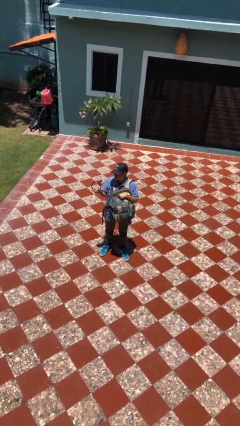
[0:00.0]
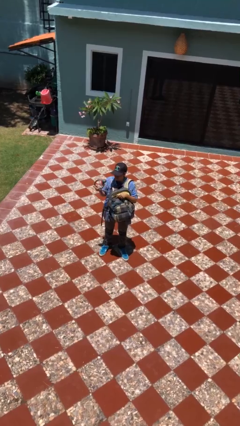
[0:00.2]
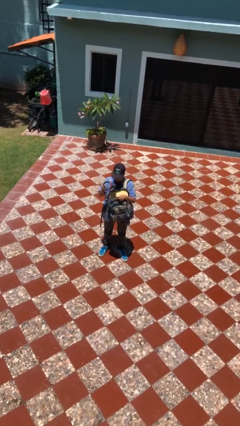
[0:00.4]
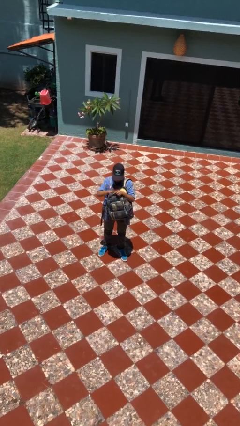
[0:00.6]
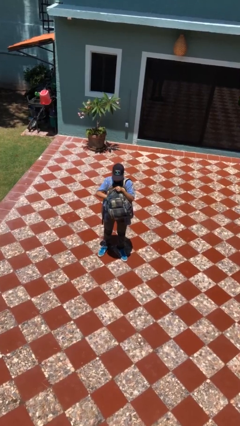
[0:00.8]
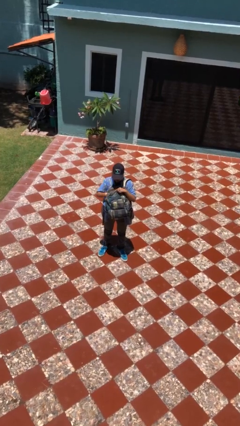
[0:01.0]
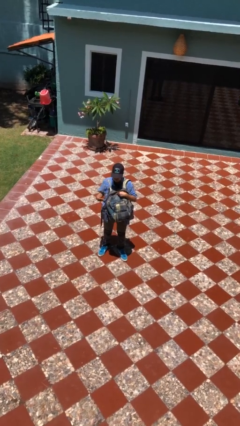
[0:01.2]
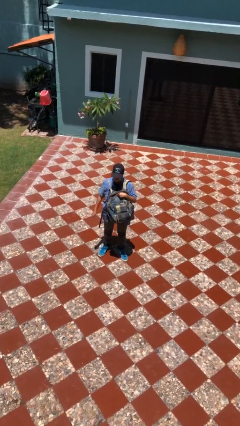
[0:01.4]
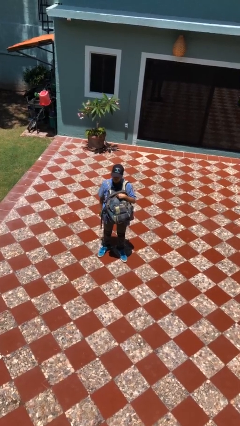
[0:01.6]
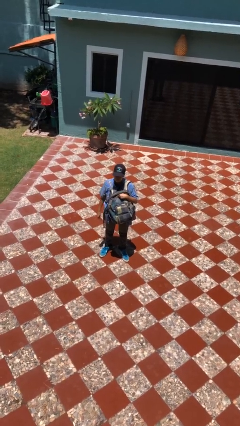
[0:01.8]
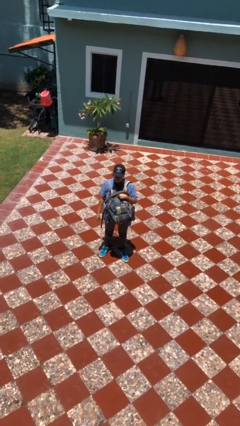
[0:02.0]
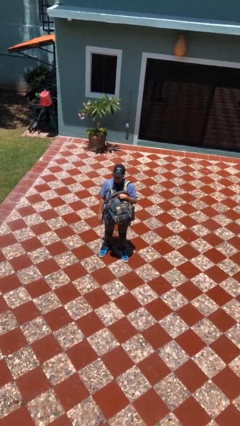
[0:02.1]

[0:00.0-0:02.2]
person puts object into backpack

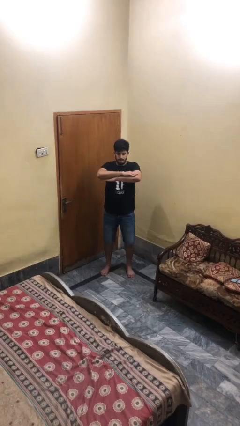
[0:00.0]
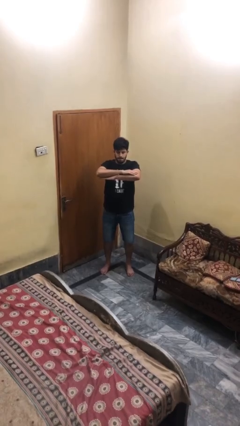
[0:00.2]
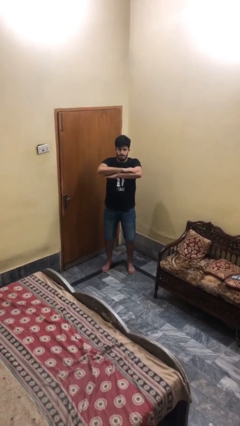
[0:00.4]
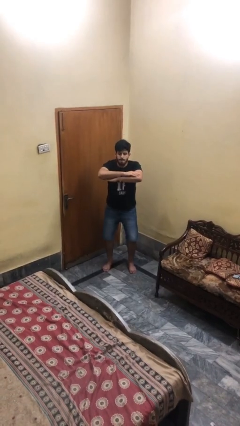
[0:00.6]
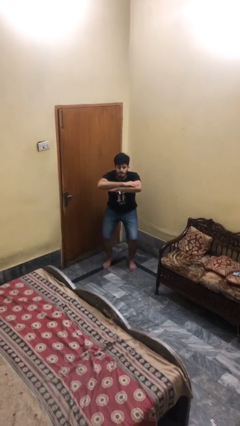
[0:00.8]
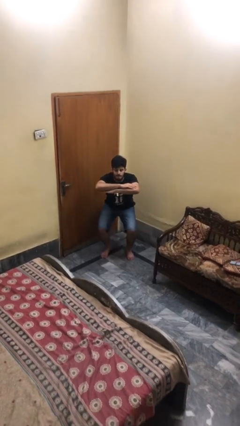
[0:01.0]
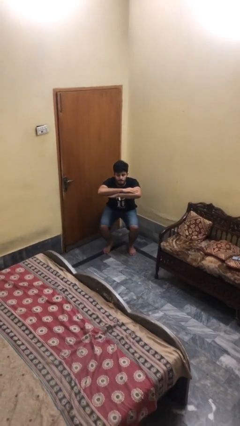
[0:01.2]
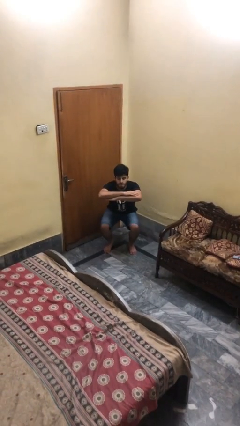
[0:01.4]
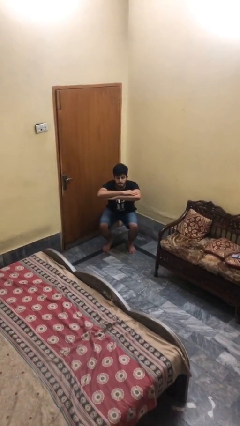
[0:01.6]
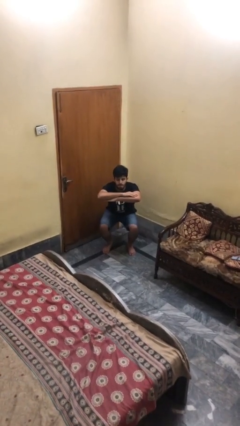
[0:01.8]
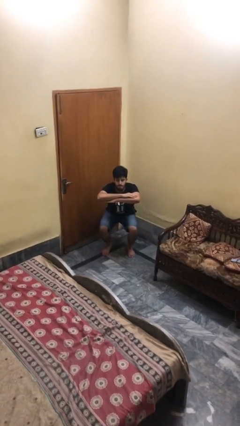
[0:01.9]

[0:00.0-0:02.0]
person squats

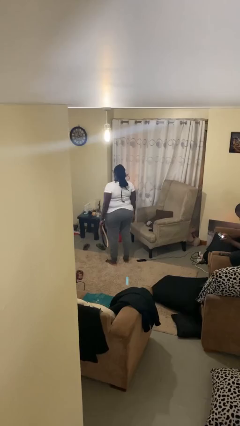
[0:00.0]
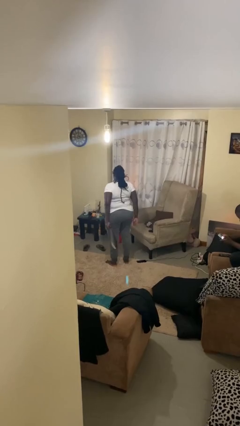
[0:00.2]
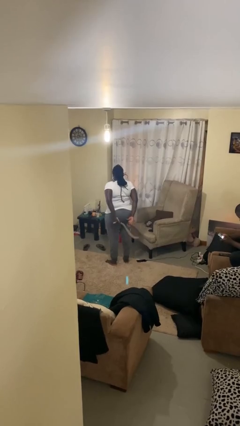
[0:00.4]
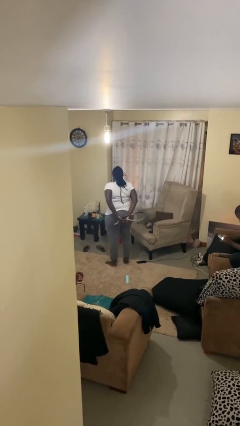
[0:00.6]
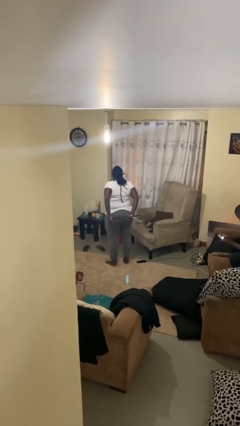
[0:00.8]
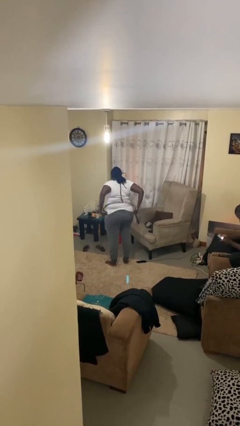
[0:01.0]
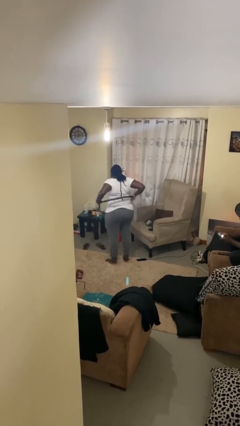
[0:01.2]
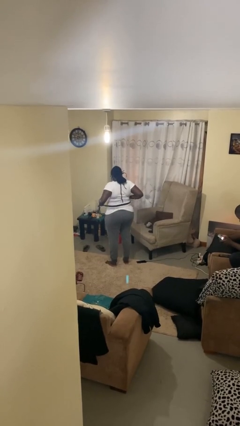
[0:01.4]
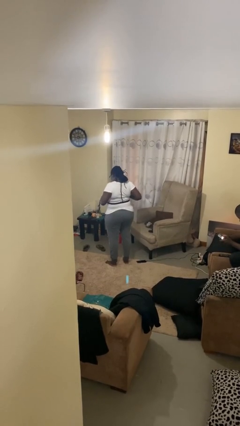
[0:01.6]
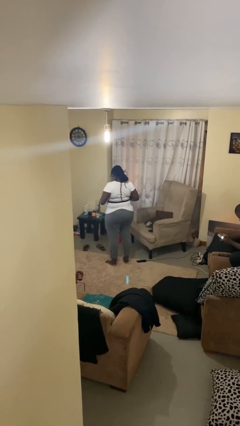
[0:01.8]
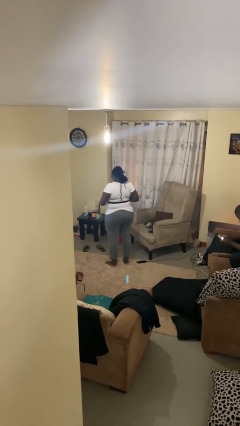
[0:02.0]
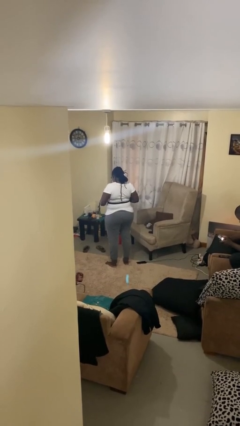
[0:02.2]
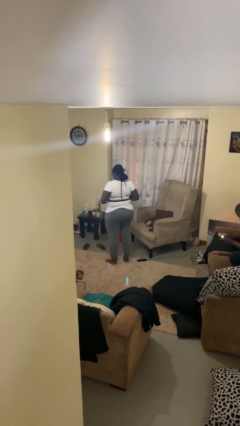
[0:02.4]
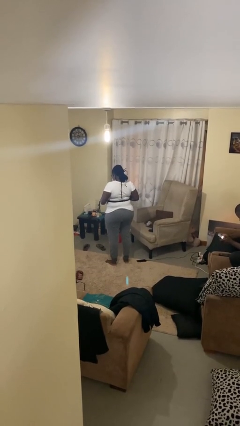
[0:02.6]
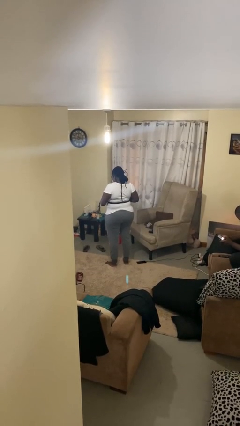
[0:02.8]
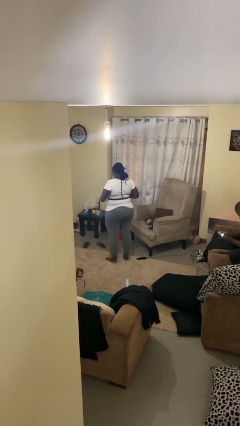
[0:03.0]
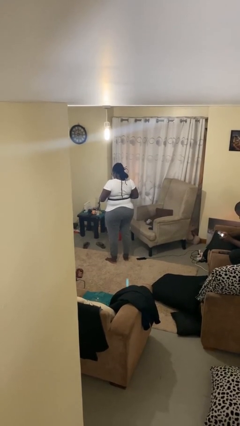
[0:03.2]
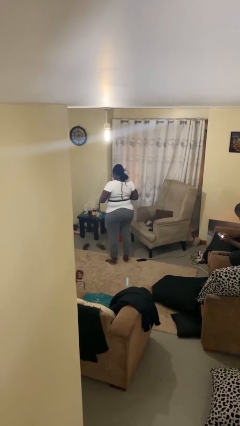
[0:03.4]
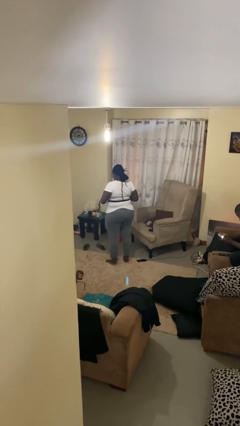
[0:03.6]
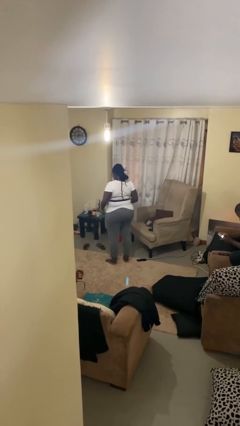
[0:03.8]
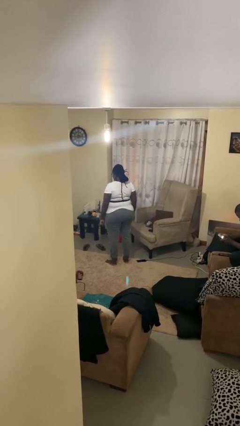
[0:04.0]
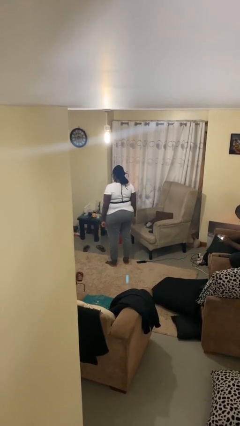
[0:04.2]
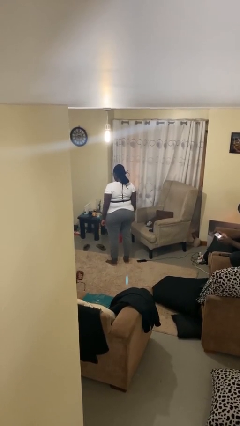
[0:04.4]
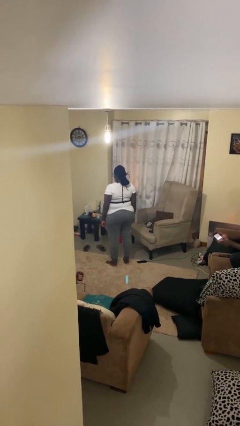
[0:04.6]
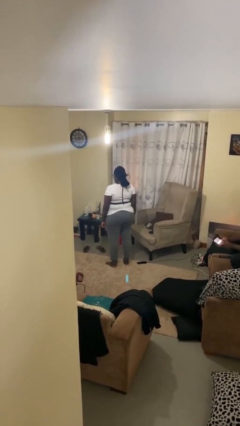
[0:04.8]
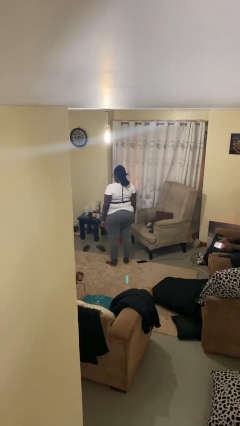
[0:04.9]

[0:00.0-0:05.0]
person puts on belt

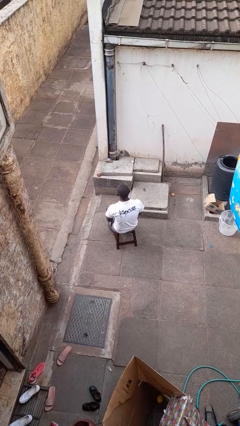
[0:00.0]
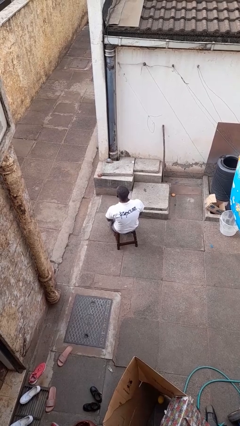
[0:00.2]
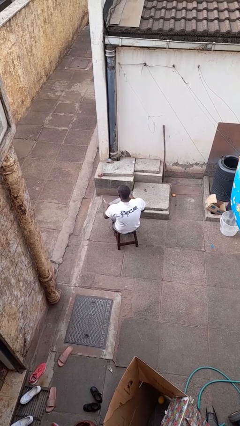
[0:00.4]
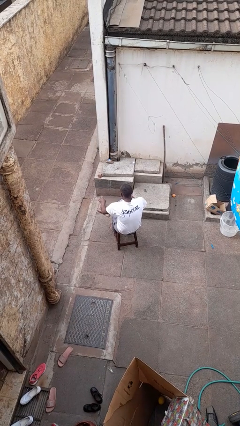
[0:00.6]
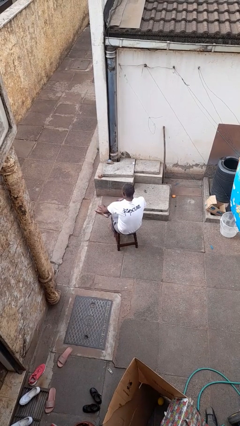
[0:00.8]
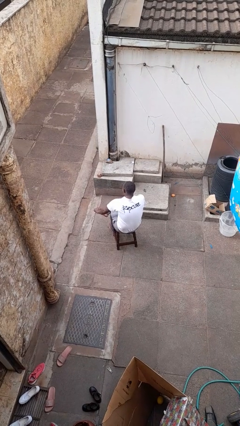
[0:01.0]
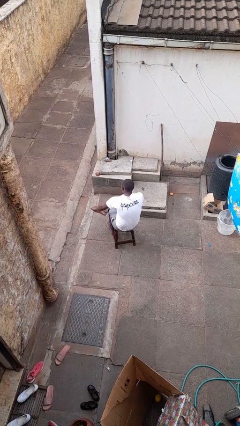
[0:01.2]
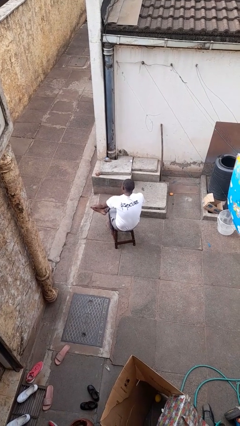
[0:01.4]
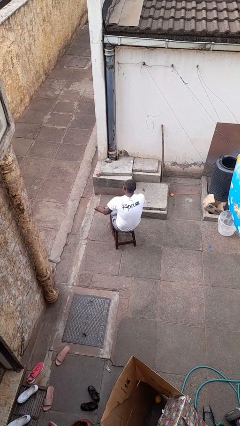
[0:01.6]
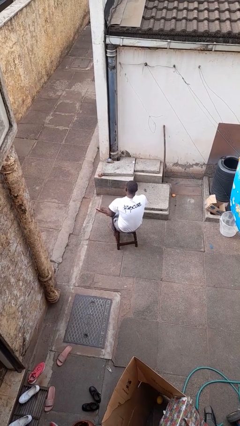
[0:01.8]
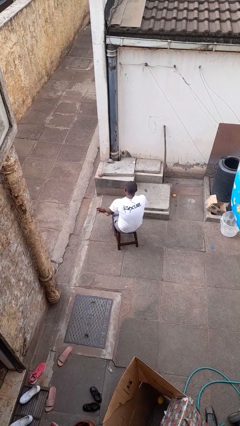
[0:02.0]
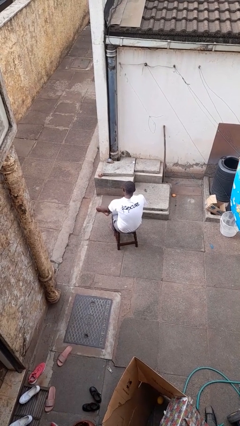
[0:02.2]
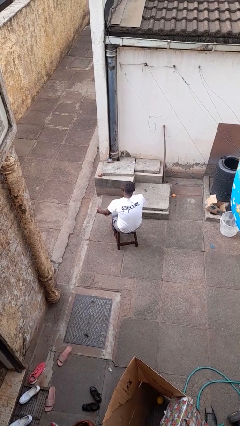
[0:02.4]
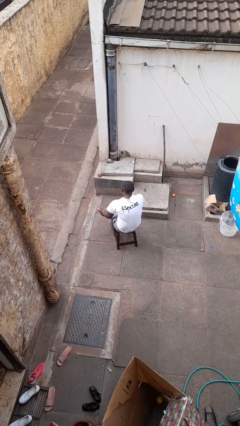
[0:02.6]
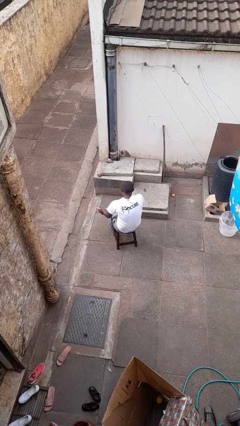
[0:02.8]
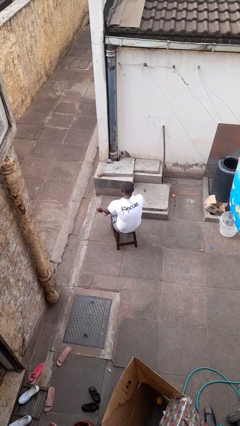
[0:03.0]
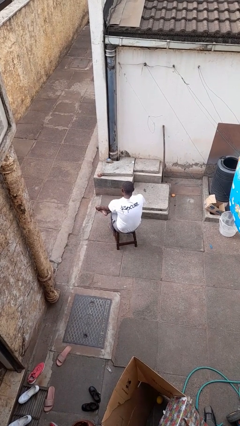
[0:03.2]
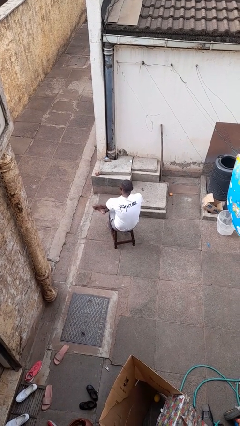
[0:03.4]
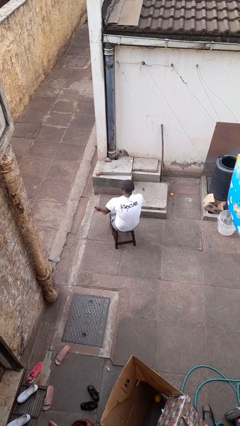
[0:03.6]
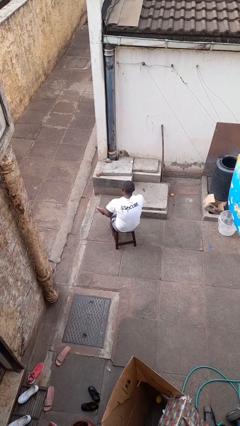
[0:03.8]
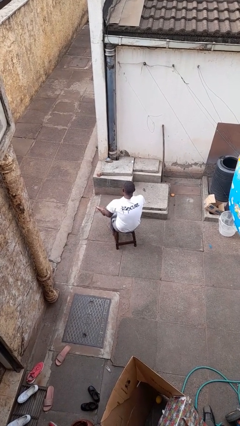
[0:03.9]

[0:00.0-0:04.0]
person rubs foot

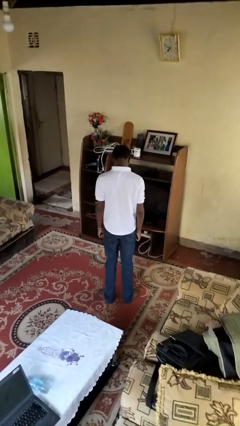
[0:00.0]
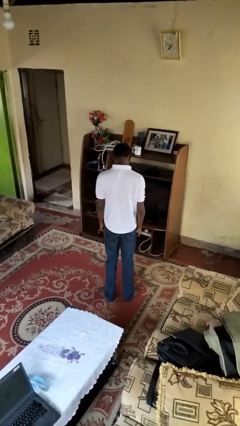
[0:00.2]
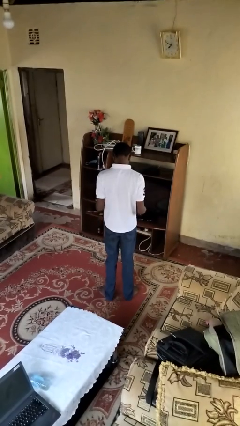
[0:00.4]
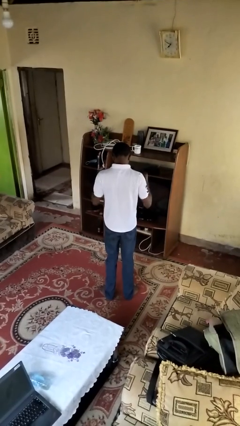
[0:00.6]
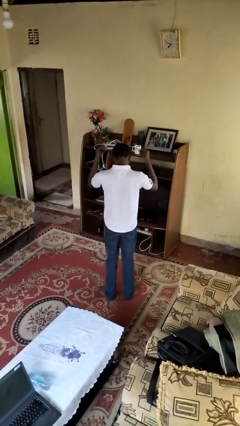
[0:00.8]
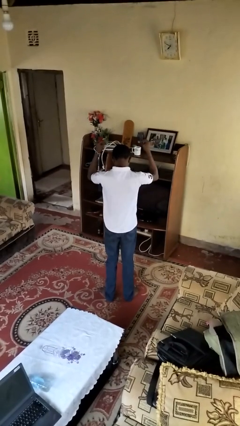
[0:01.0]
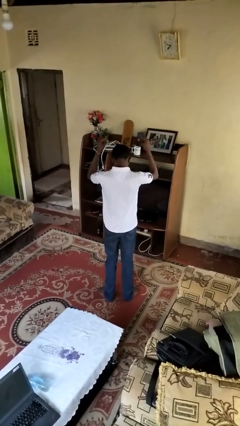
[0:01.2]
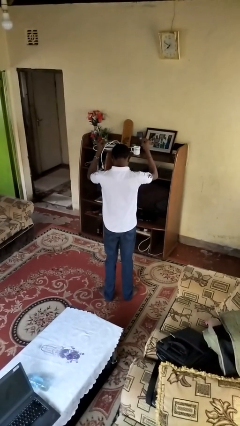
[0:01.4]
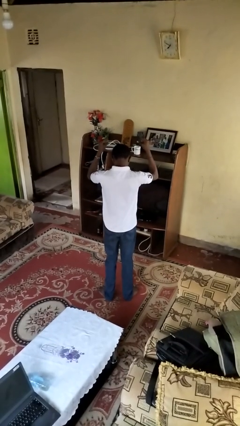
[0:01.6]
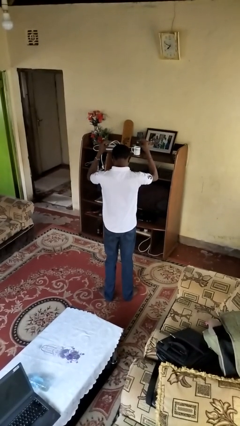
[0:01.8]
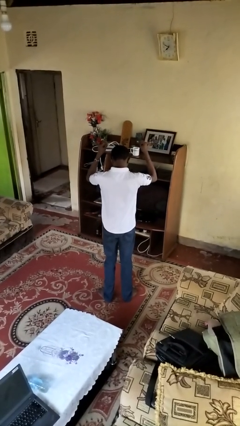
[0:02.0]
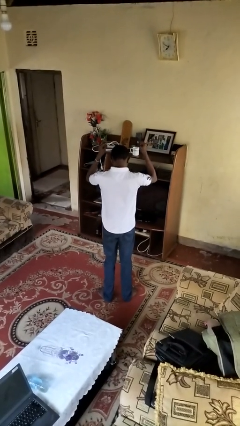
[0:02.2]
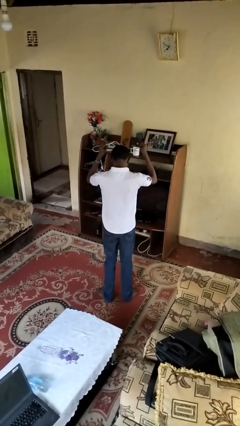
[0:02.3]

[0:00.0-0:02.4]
person snaps fingers

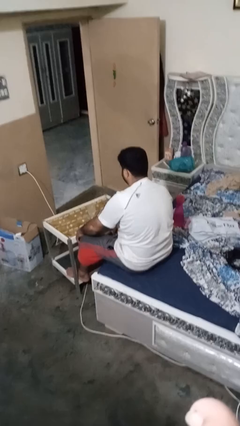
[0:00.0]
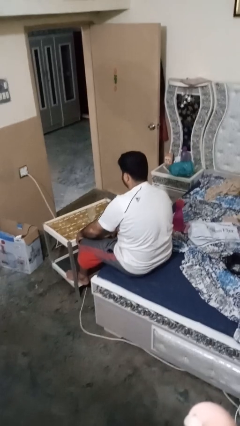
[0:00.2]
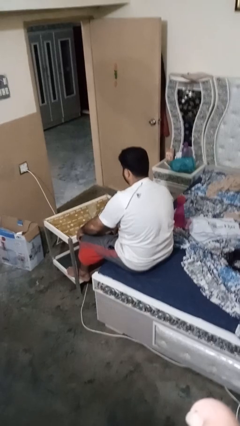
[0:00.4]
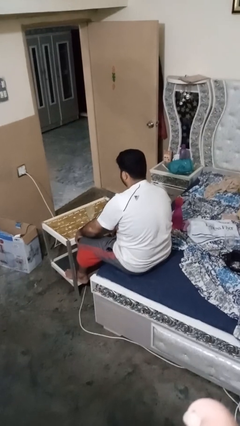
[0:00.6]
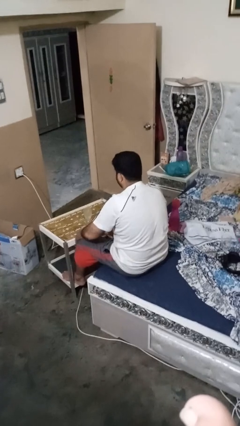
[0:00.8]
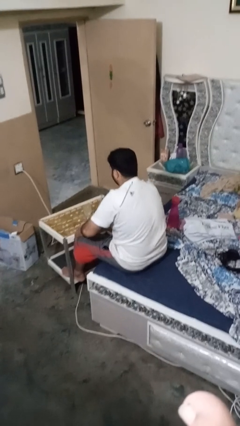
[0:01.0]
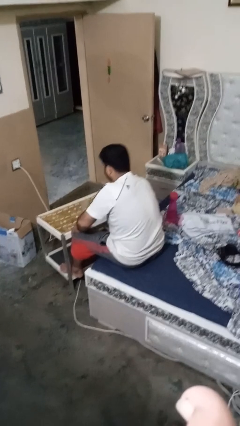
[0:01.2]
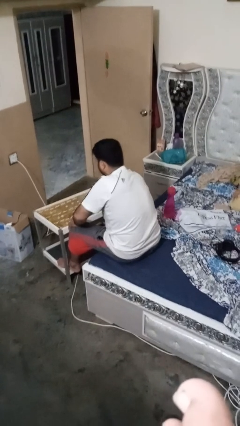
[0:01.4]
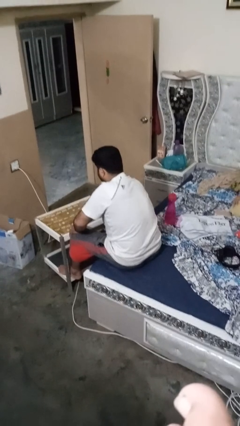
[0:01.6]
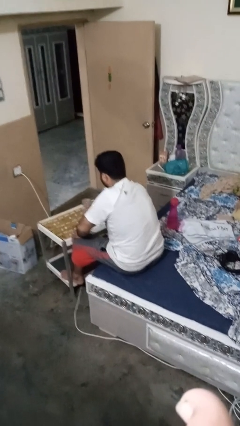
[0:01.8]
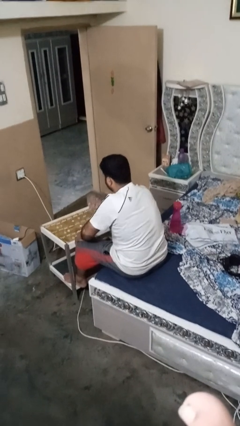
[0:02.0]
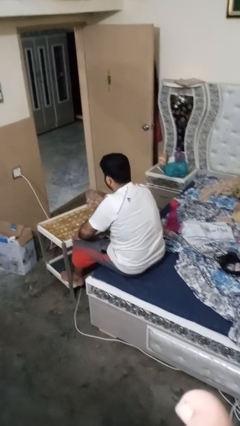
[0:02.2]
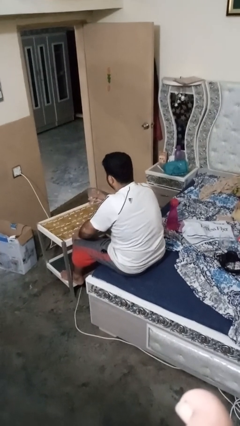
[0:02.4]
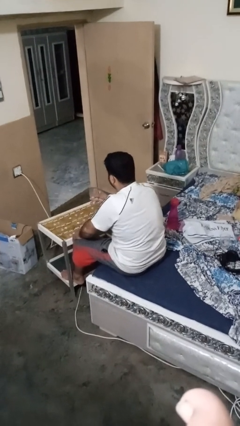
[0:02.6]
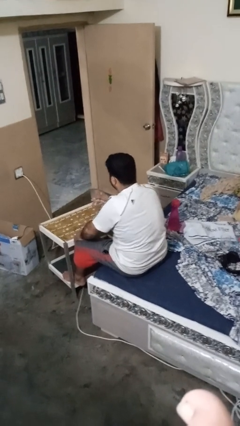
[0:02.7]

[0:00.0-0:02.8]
person picks up object from table
